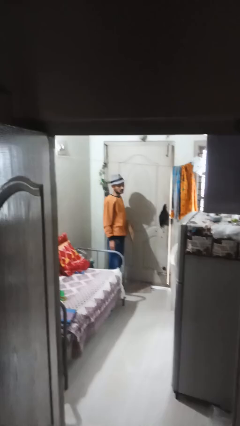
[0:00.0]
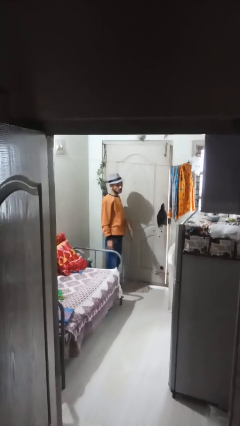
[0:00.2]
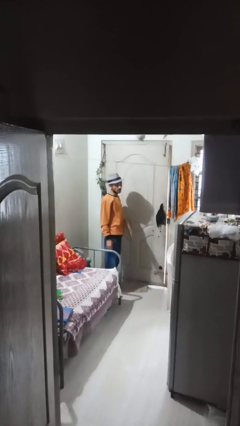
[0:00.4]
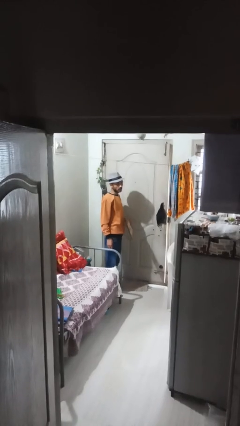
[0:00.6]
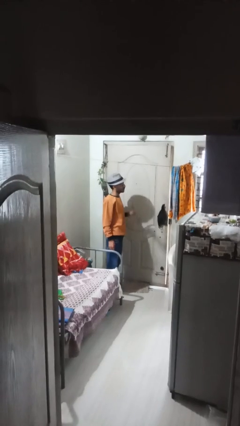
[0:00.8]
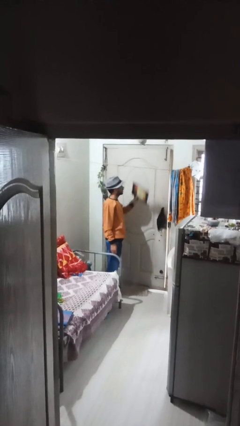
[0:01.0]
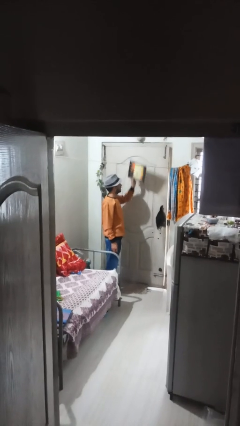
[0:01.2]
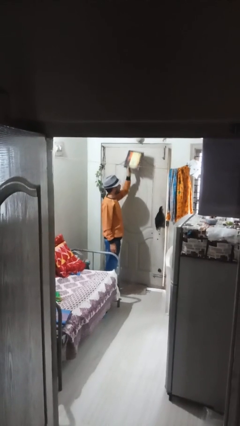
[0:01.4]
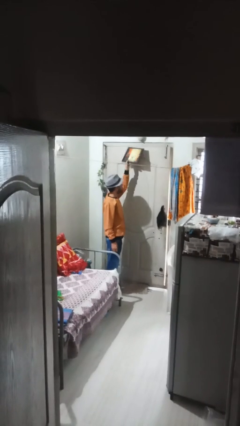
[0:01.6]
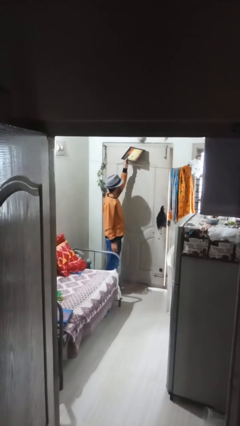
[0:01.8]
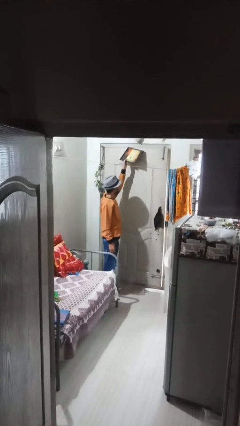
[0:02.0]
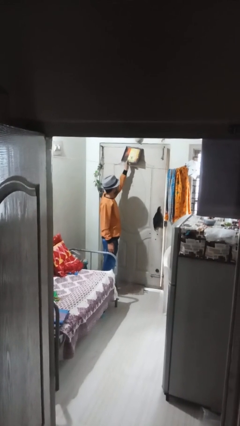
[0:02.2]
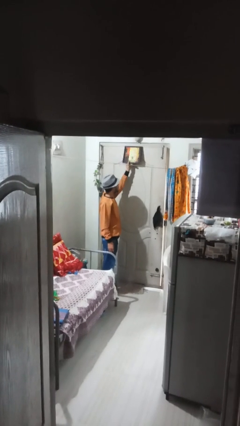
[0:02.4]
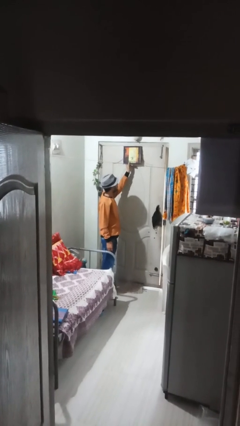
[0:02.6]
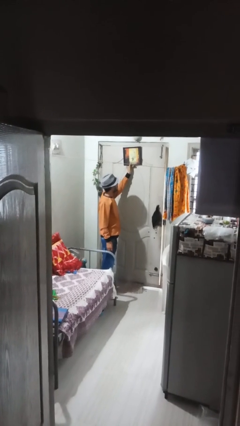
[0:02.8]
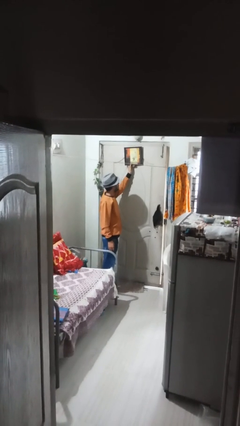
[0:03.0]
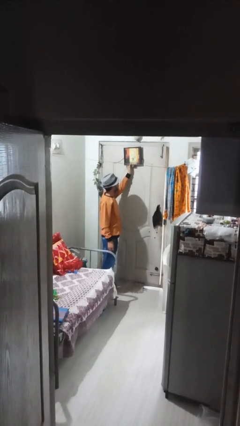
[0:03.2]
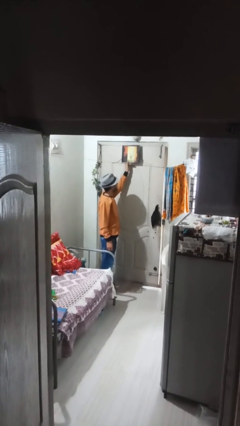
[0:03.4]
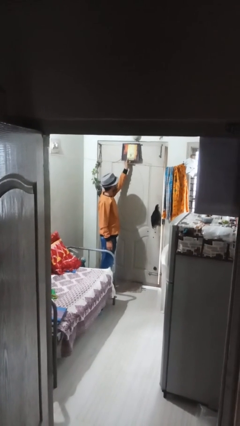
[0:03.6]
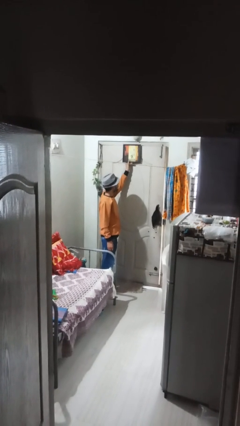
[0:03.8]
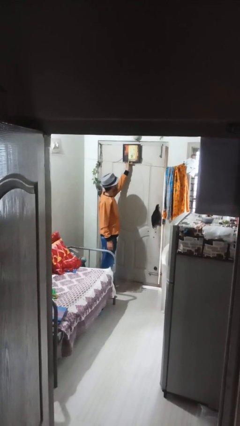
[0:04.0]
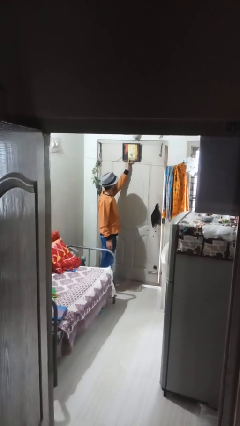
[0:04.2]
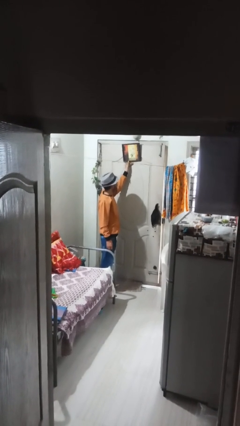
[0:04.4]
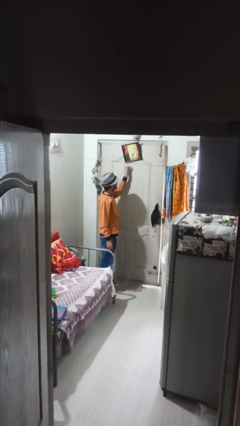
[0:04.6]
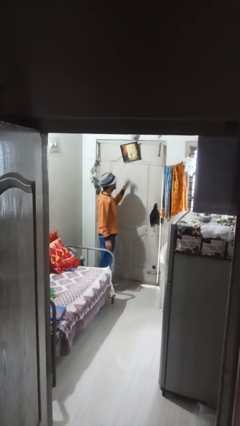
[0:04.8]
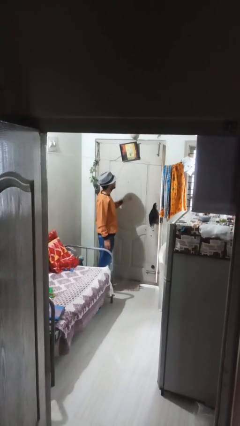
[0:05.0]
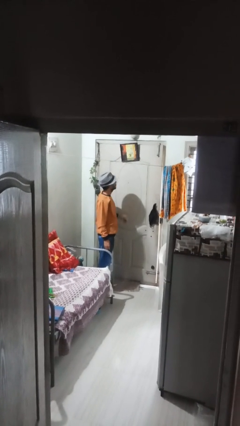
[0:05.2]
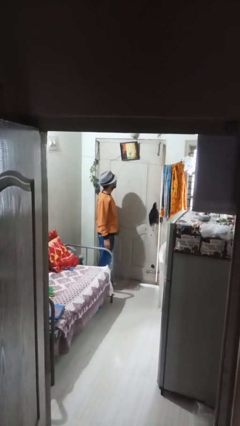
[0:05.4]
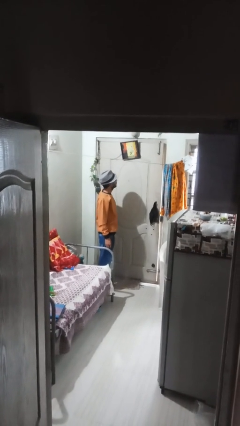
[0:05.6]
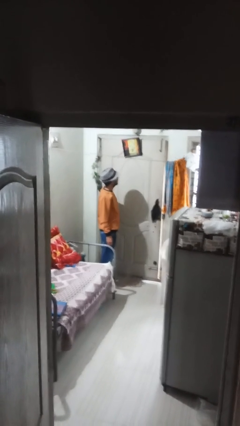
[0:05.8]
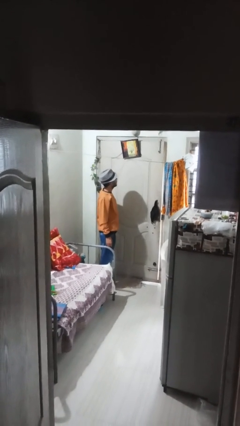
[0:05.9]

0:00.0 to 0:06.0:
person puts up picture frame

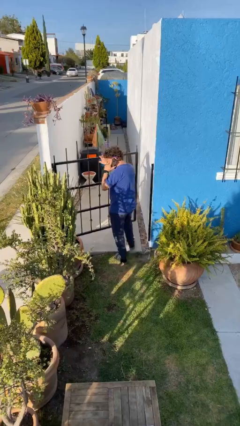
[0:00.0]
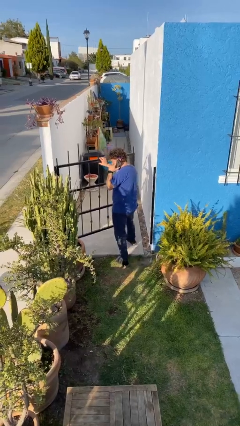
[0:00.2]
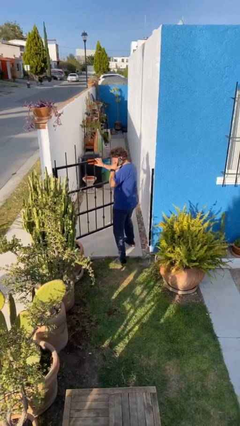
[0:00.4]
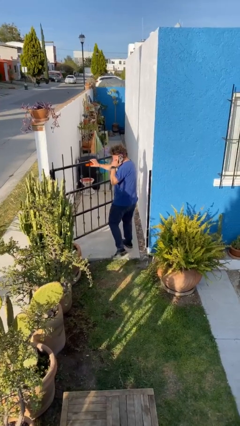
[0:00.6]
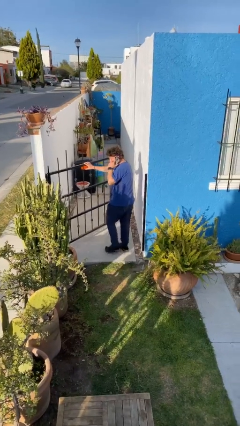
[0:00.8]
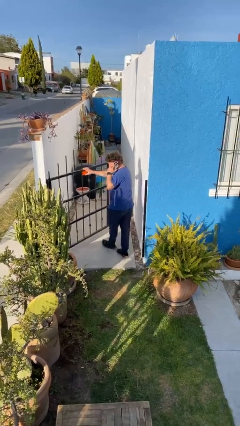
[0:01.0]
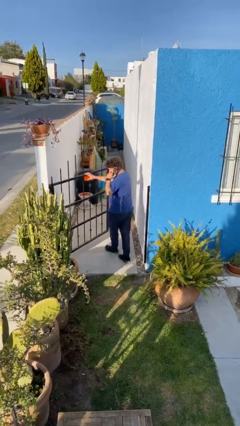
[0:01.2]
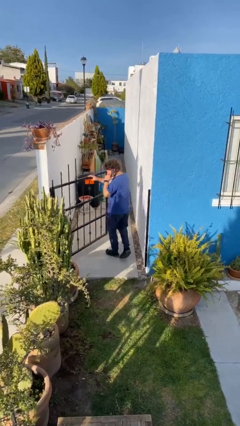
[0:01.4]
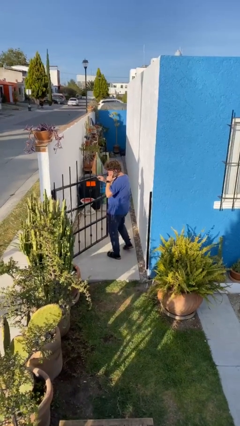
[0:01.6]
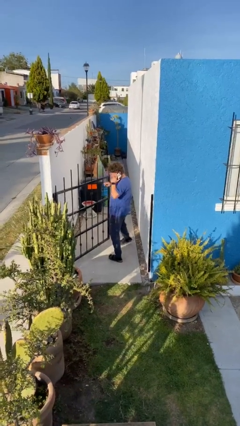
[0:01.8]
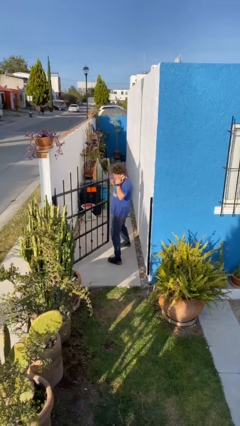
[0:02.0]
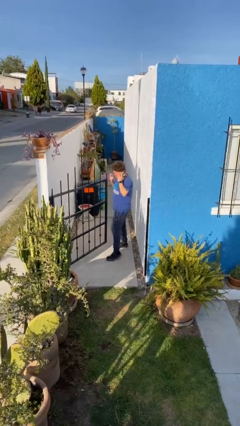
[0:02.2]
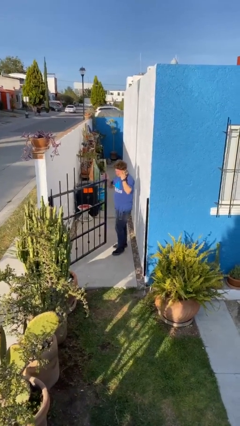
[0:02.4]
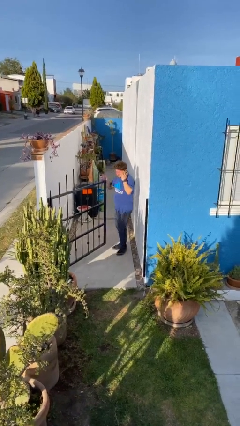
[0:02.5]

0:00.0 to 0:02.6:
person exits scene through structure

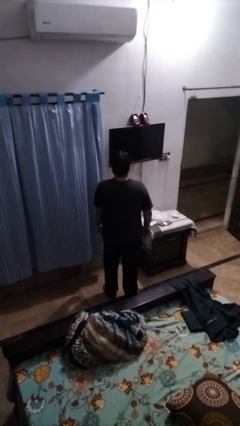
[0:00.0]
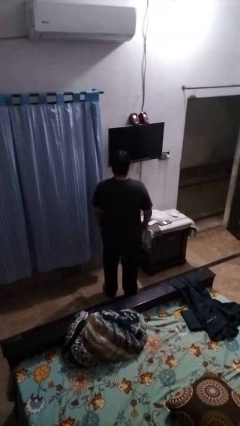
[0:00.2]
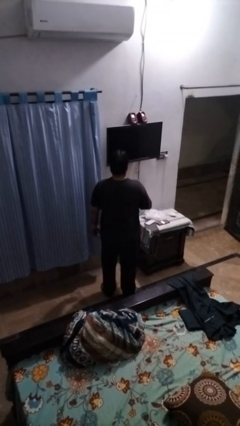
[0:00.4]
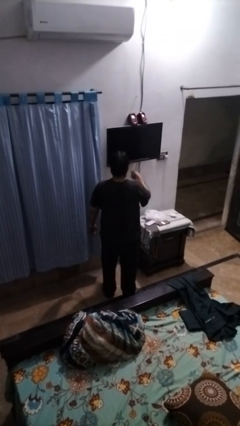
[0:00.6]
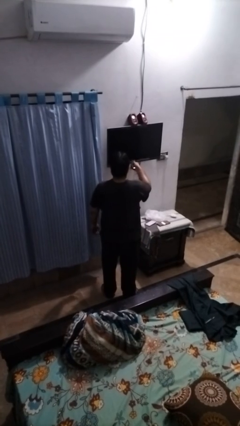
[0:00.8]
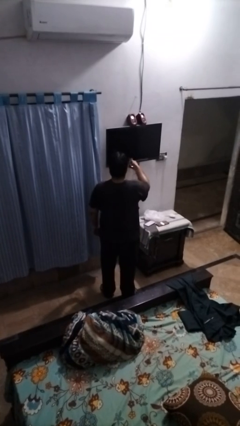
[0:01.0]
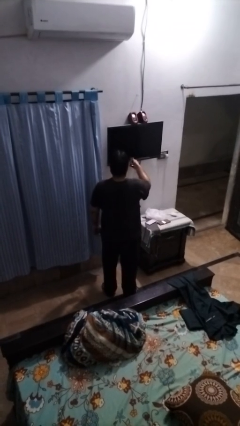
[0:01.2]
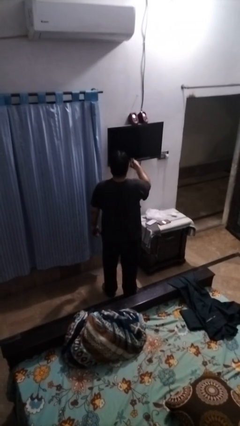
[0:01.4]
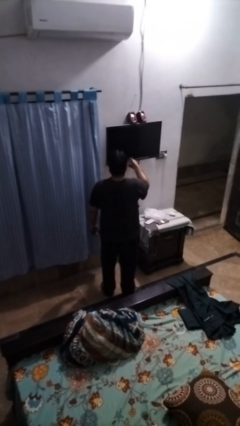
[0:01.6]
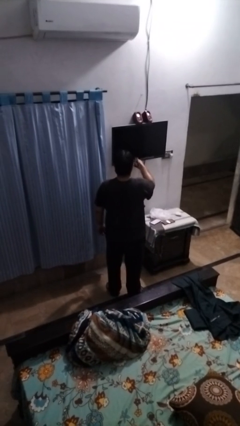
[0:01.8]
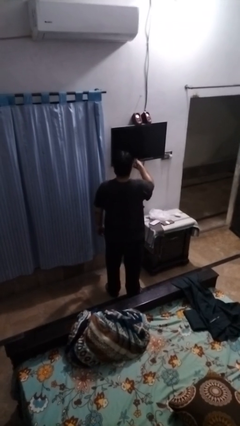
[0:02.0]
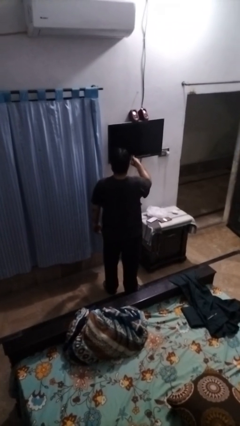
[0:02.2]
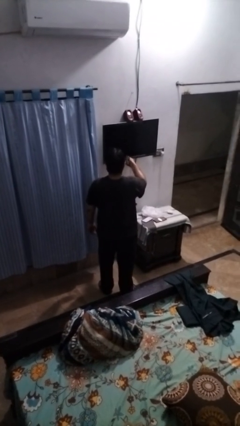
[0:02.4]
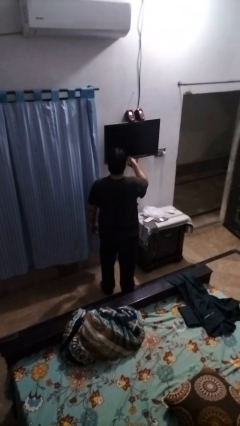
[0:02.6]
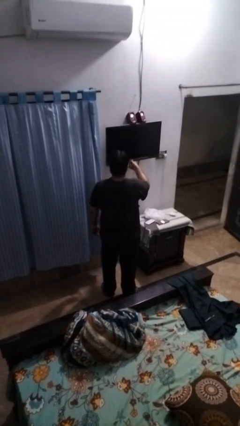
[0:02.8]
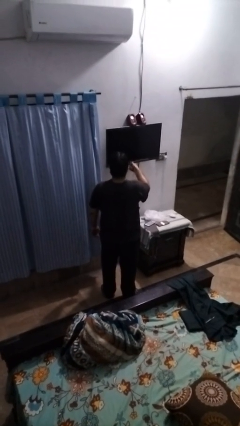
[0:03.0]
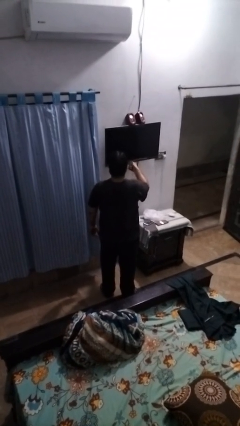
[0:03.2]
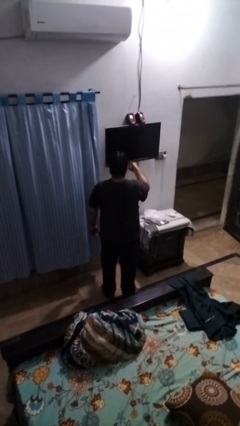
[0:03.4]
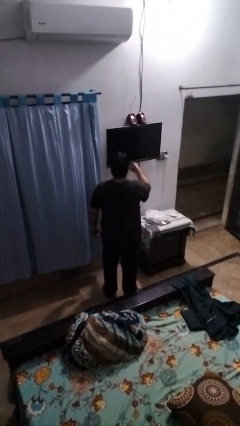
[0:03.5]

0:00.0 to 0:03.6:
person uses television remote

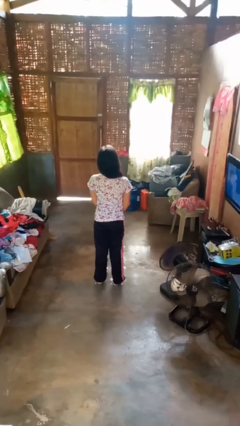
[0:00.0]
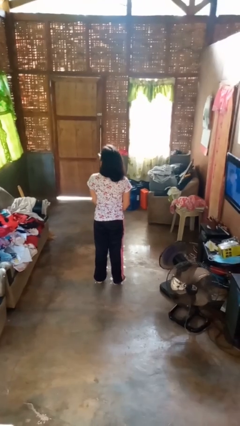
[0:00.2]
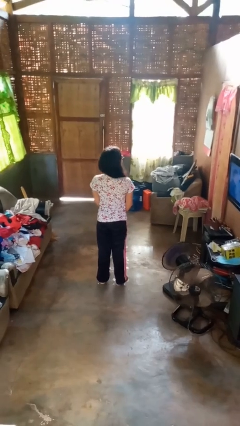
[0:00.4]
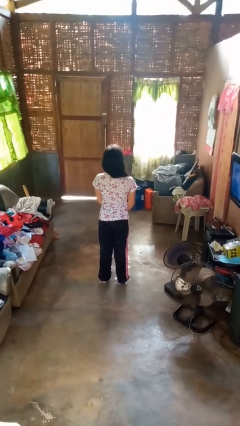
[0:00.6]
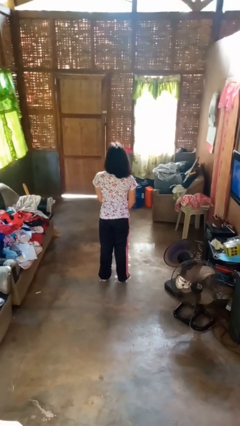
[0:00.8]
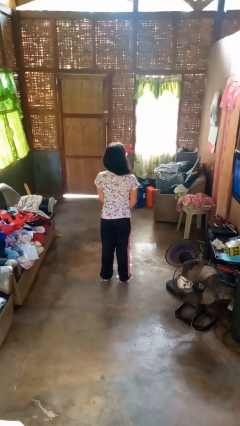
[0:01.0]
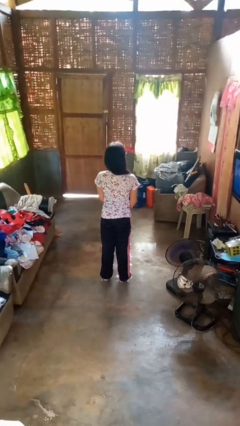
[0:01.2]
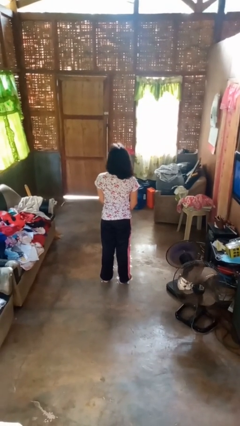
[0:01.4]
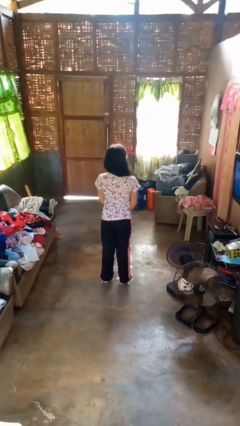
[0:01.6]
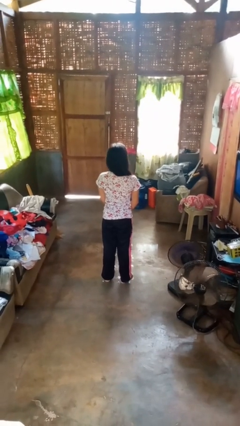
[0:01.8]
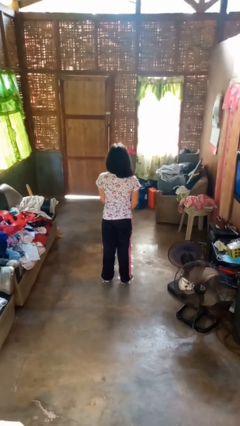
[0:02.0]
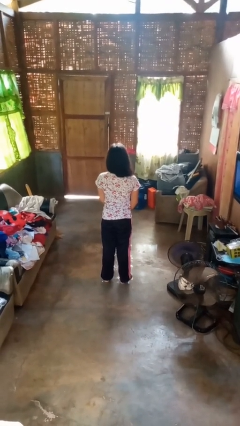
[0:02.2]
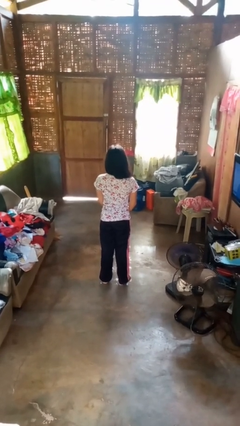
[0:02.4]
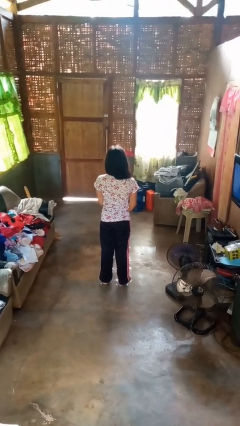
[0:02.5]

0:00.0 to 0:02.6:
person shakes head

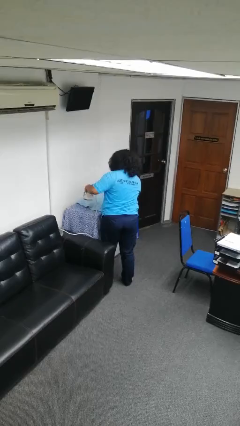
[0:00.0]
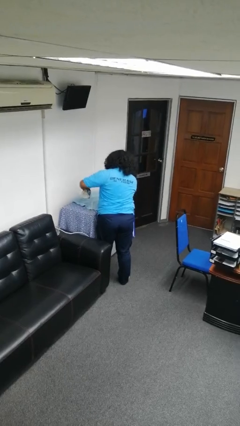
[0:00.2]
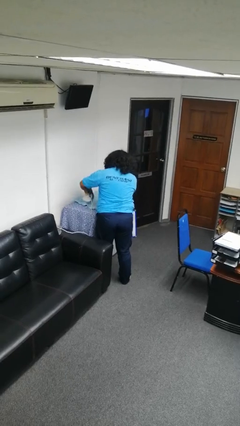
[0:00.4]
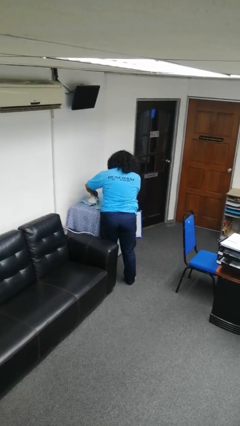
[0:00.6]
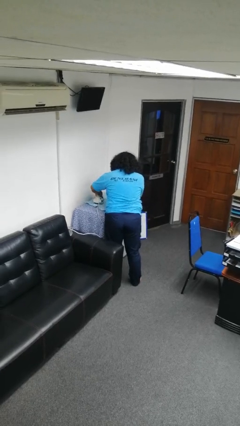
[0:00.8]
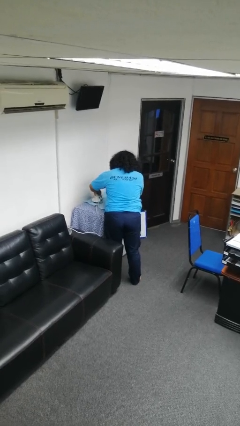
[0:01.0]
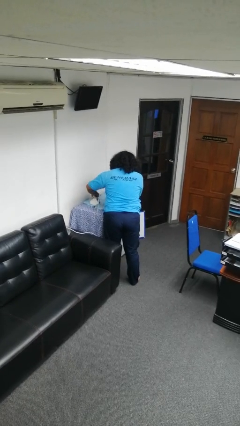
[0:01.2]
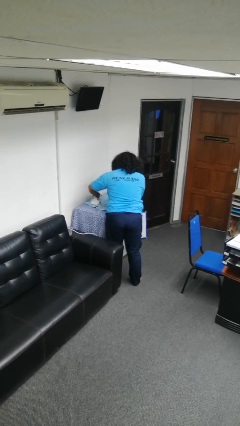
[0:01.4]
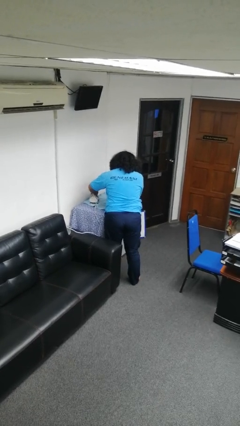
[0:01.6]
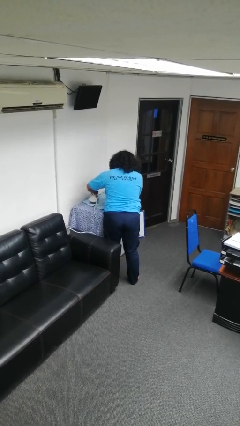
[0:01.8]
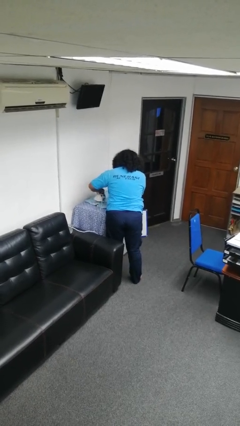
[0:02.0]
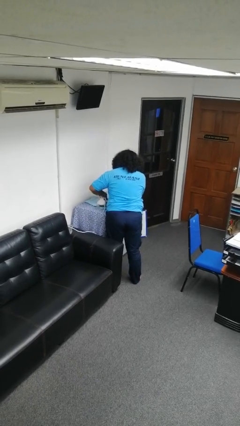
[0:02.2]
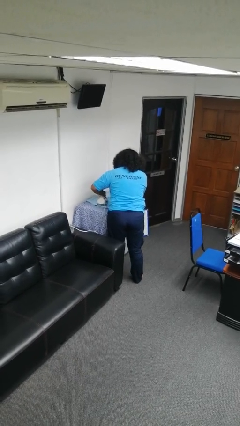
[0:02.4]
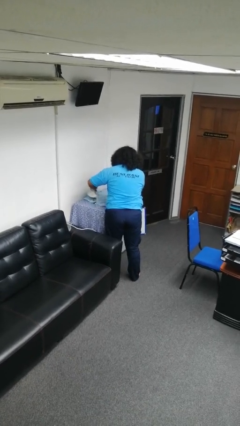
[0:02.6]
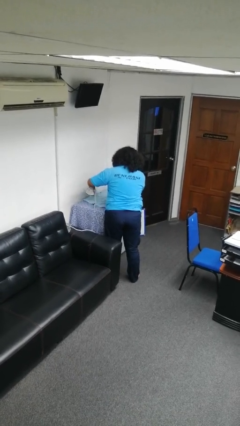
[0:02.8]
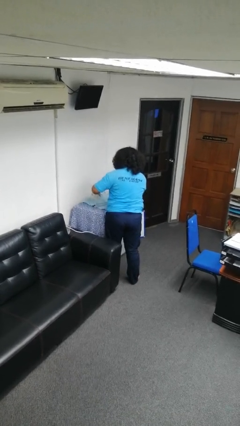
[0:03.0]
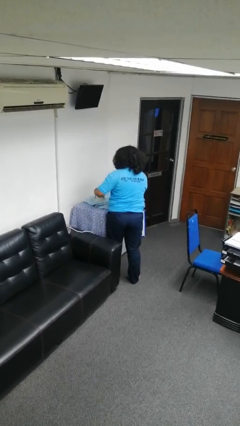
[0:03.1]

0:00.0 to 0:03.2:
person irons clothes
